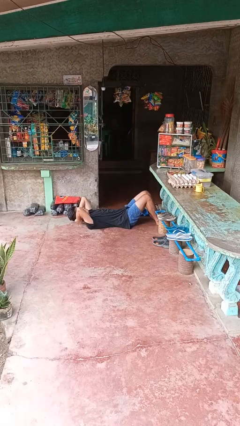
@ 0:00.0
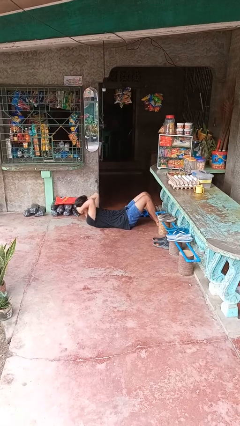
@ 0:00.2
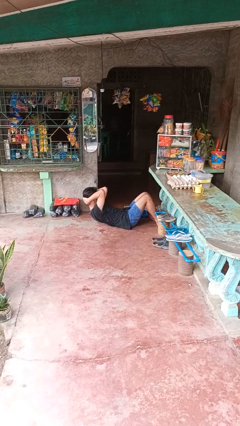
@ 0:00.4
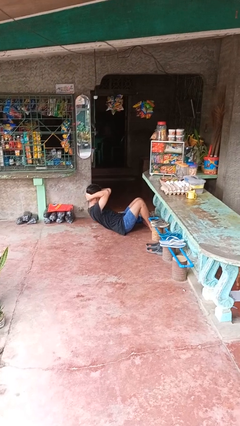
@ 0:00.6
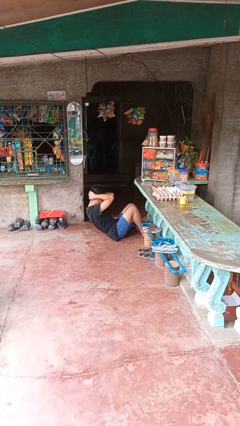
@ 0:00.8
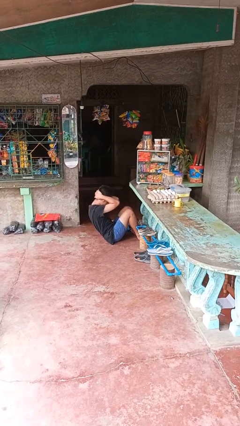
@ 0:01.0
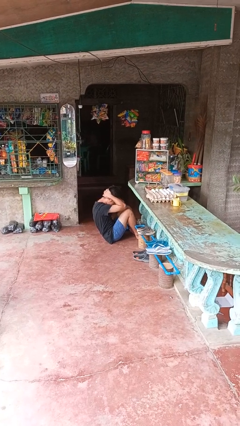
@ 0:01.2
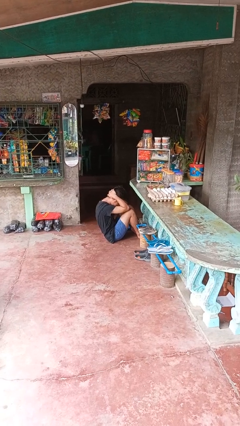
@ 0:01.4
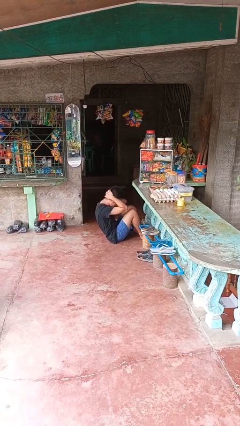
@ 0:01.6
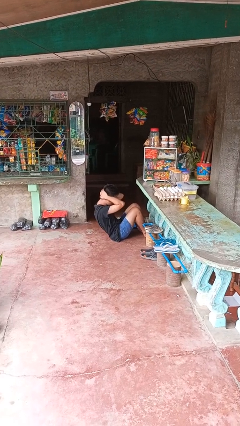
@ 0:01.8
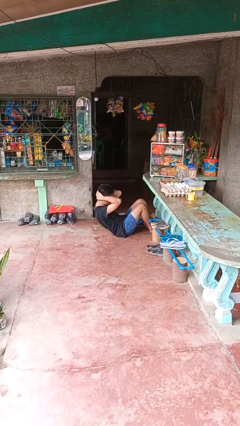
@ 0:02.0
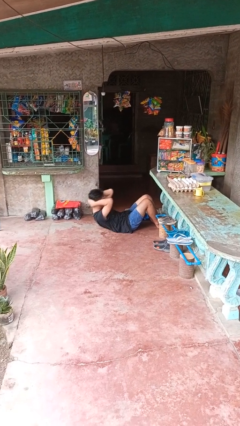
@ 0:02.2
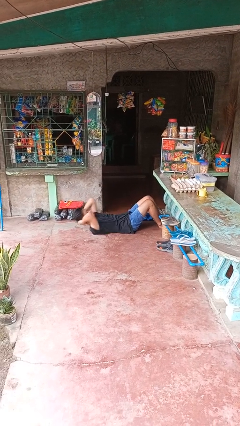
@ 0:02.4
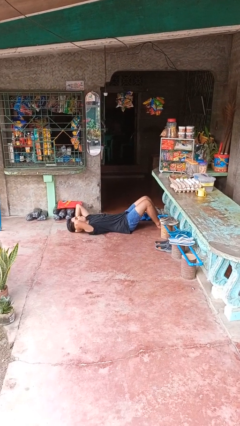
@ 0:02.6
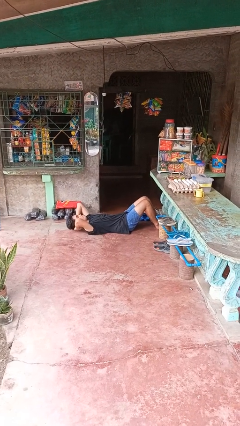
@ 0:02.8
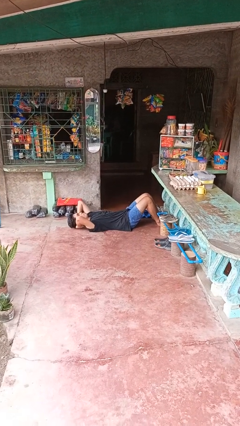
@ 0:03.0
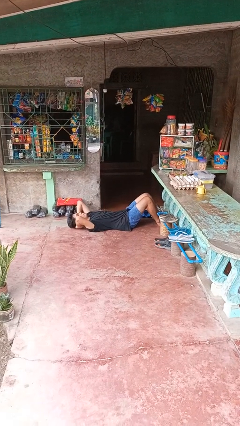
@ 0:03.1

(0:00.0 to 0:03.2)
person exercises with situp

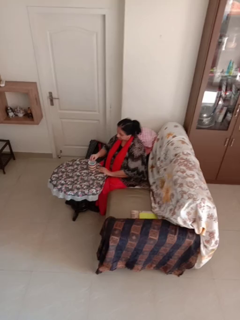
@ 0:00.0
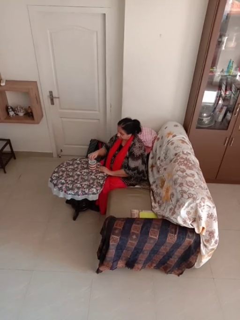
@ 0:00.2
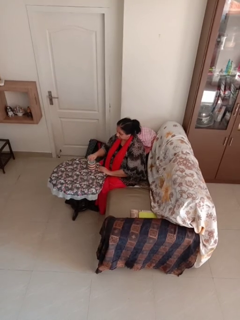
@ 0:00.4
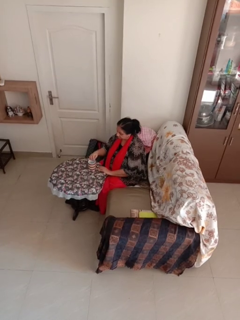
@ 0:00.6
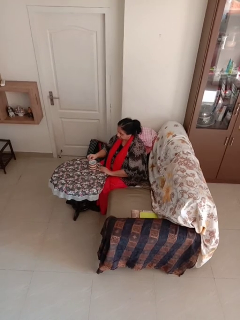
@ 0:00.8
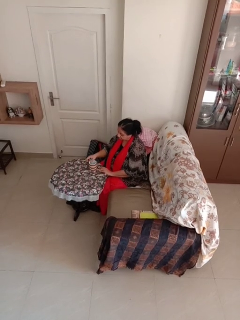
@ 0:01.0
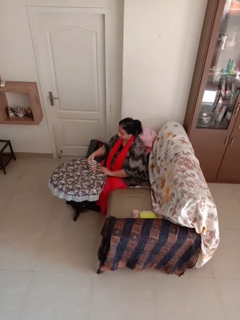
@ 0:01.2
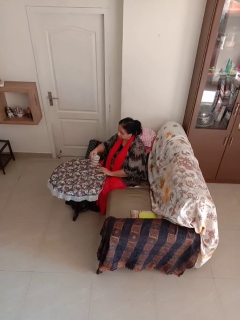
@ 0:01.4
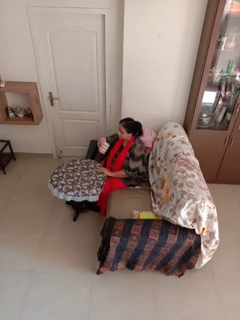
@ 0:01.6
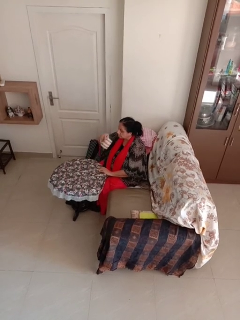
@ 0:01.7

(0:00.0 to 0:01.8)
person stirs mug

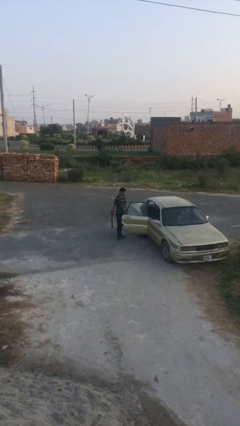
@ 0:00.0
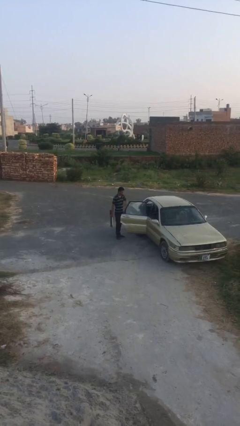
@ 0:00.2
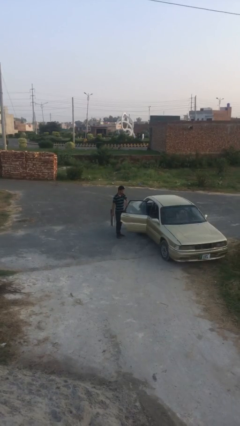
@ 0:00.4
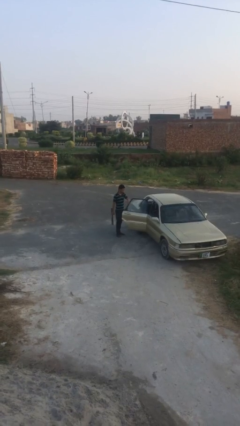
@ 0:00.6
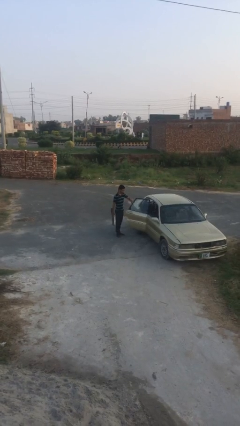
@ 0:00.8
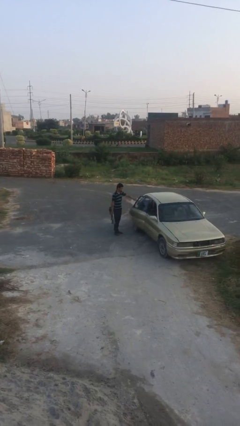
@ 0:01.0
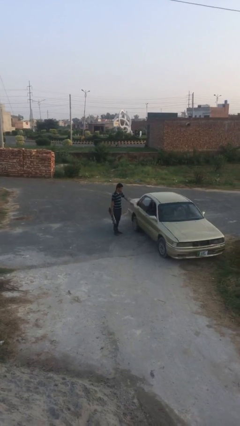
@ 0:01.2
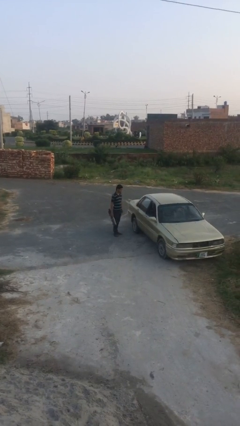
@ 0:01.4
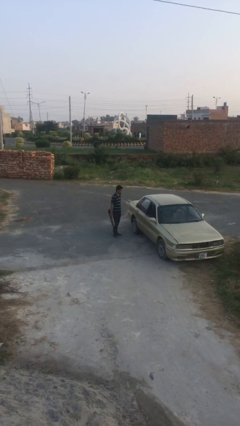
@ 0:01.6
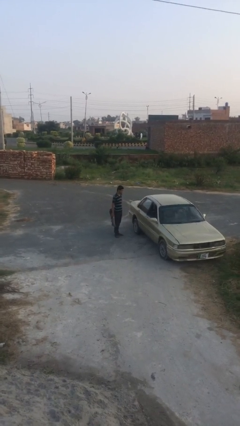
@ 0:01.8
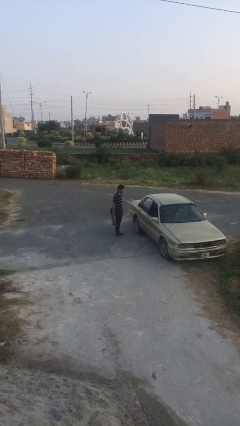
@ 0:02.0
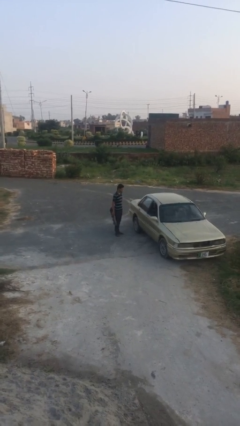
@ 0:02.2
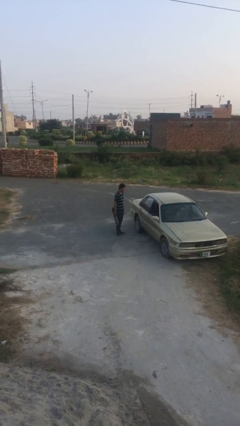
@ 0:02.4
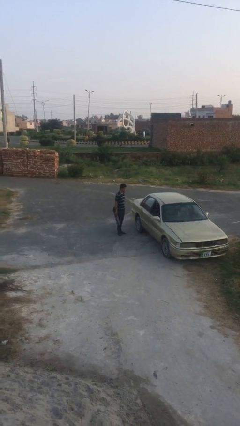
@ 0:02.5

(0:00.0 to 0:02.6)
person closes car door

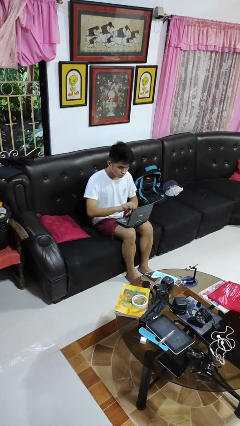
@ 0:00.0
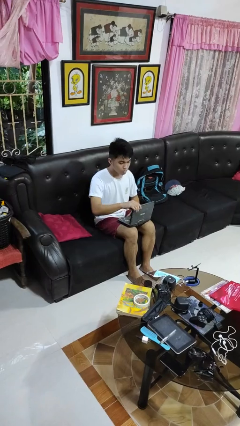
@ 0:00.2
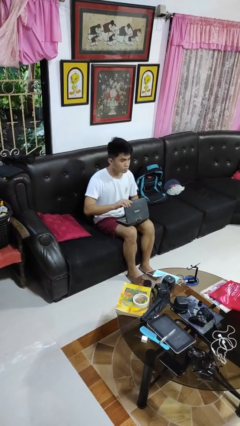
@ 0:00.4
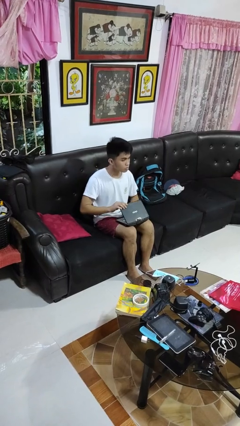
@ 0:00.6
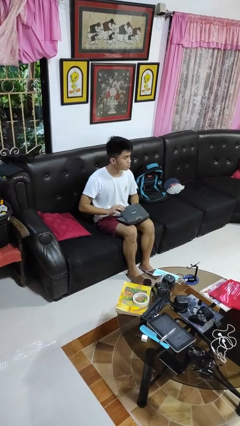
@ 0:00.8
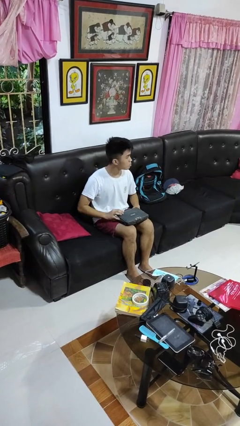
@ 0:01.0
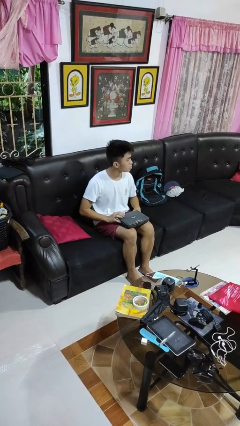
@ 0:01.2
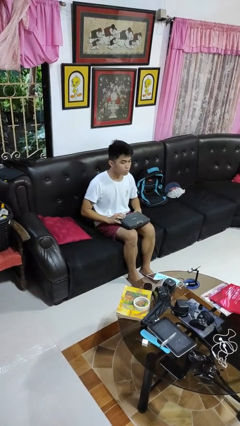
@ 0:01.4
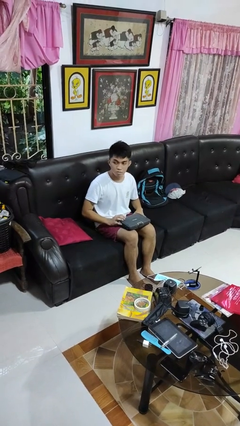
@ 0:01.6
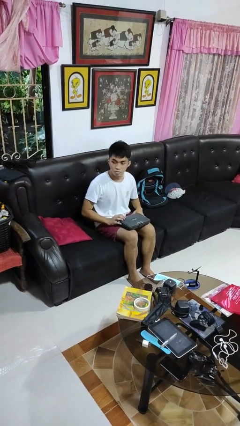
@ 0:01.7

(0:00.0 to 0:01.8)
person closes laptop

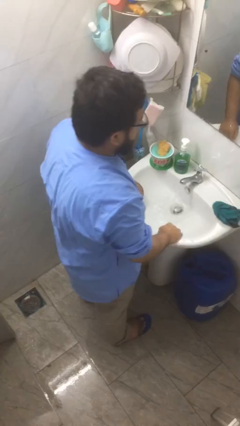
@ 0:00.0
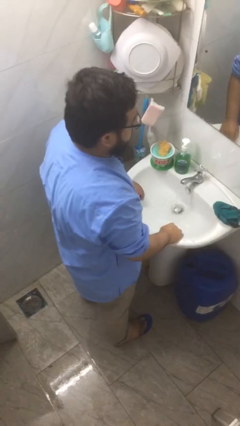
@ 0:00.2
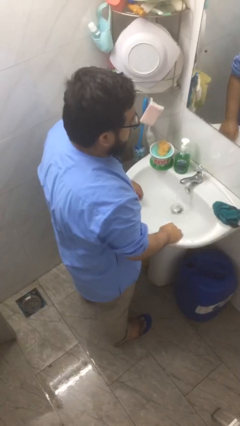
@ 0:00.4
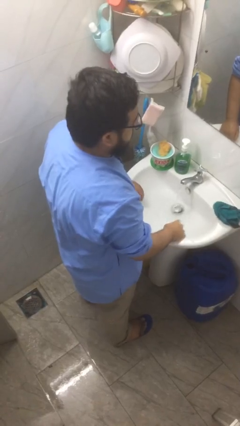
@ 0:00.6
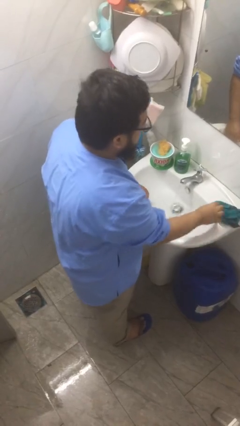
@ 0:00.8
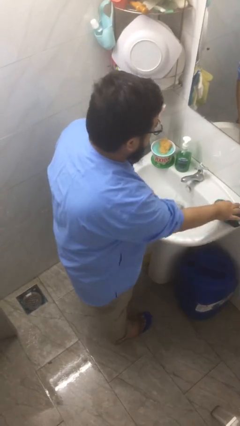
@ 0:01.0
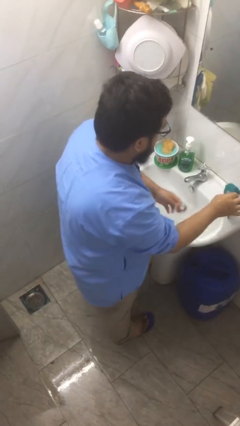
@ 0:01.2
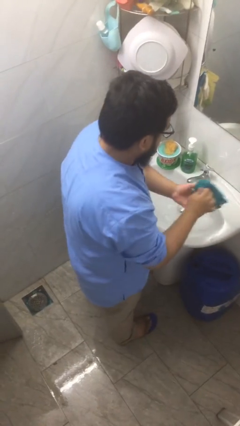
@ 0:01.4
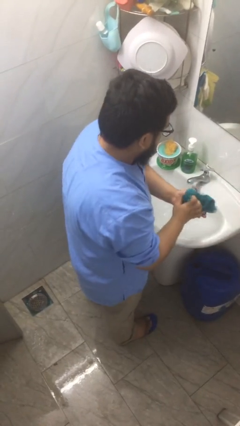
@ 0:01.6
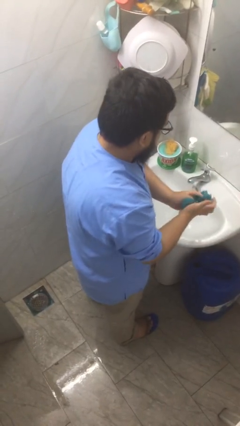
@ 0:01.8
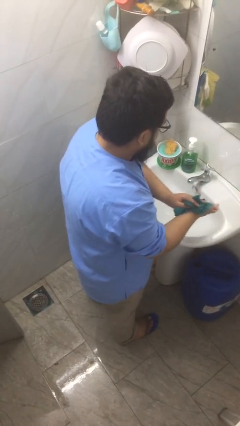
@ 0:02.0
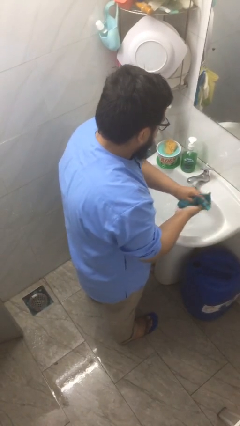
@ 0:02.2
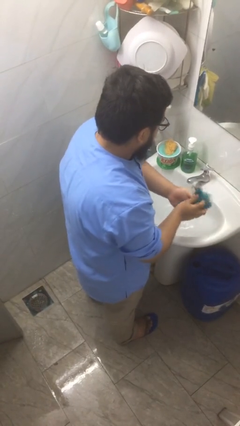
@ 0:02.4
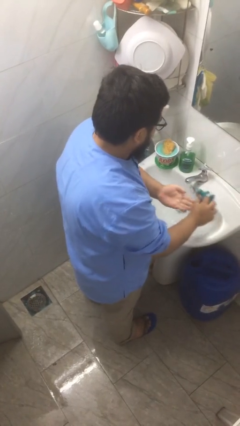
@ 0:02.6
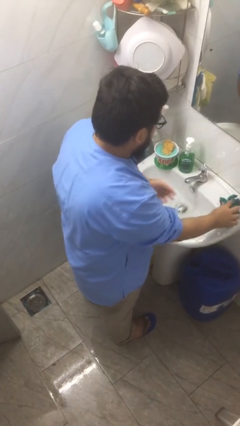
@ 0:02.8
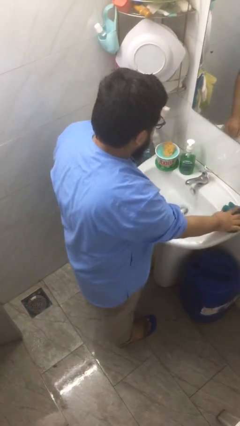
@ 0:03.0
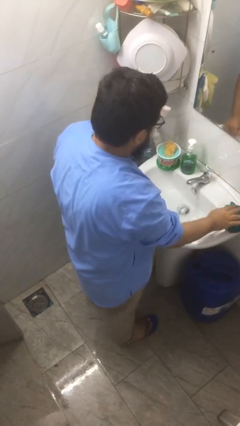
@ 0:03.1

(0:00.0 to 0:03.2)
person dries hands with towel

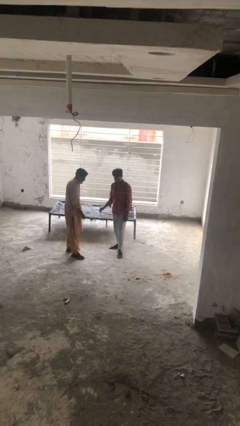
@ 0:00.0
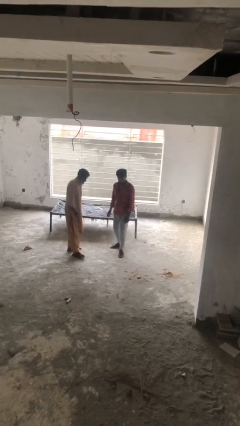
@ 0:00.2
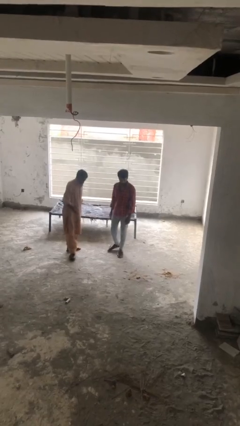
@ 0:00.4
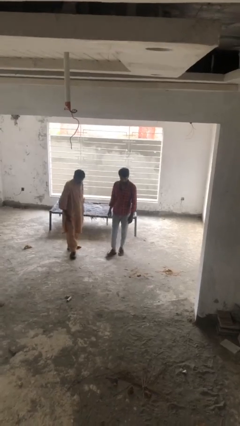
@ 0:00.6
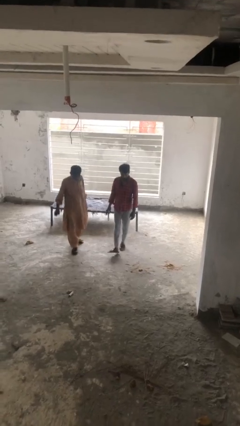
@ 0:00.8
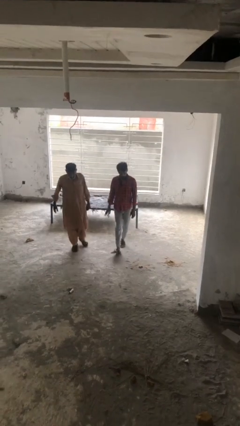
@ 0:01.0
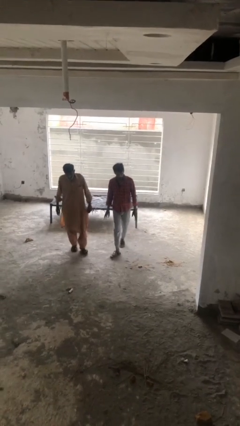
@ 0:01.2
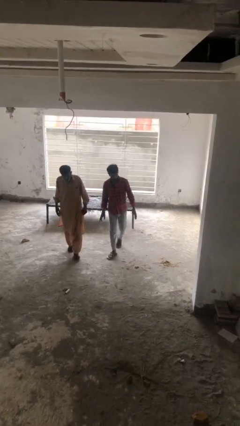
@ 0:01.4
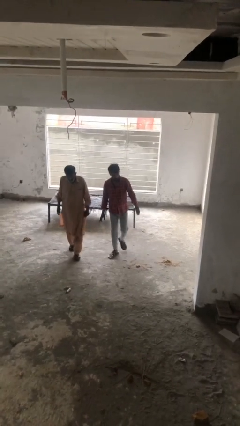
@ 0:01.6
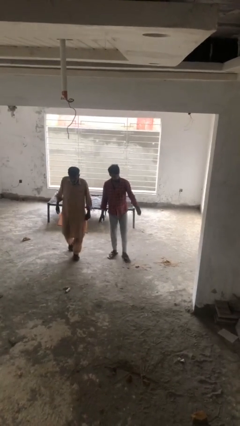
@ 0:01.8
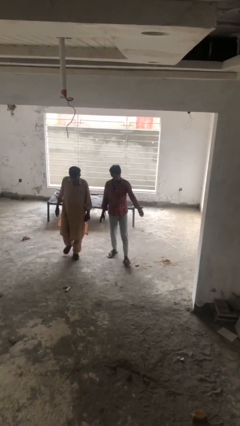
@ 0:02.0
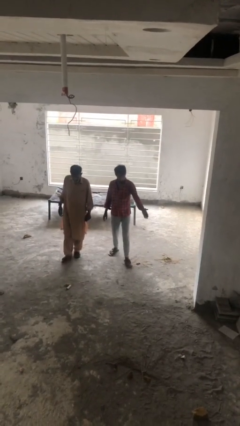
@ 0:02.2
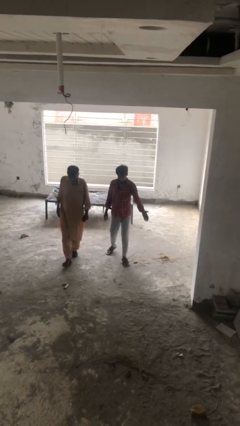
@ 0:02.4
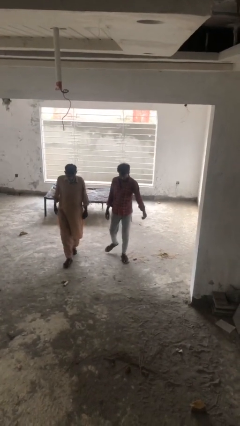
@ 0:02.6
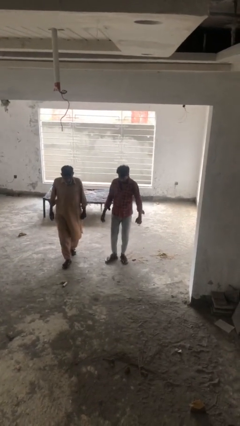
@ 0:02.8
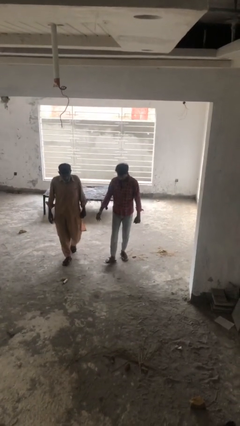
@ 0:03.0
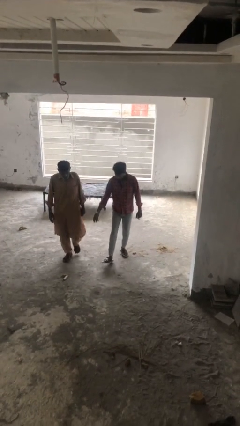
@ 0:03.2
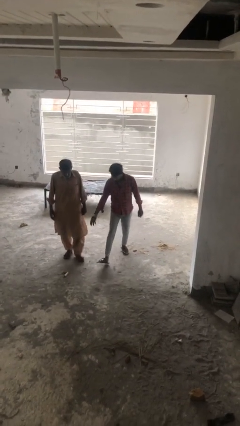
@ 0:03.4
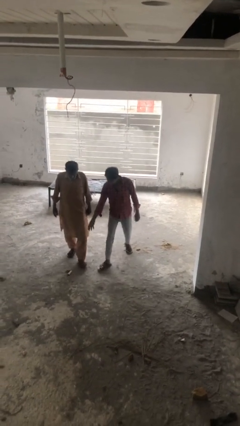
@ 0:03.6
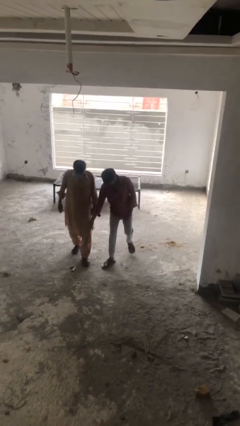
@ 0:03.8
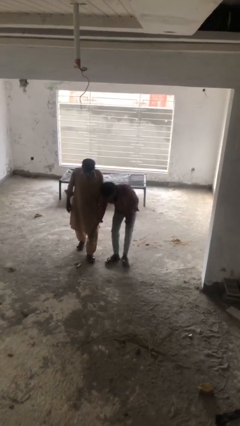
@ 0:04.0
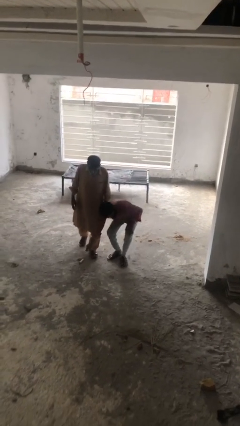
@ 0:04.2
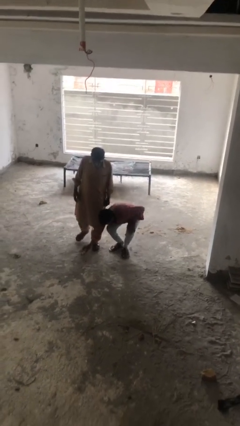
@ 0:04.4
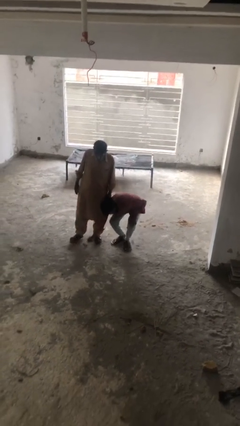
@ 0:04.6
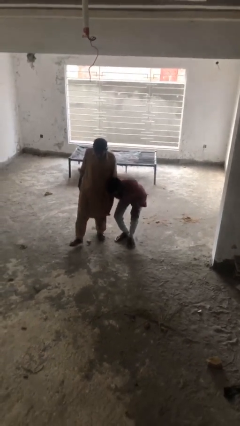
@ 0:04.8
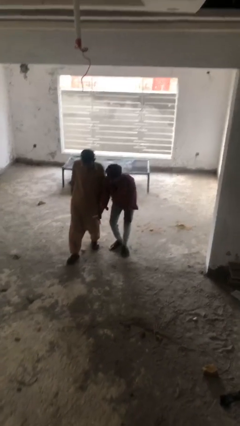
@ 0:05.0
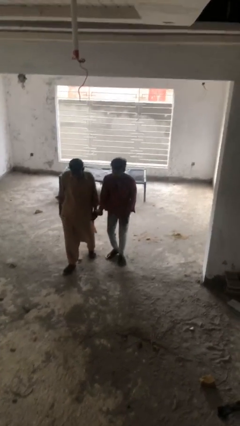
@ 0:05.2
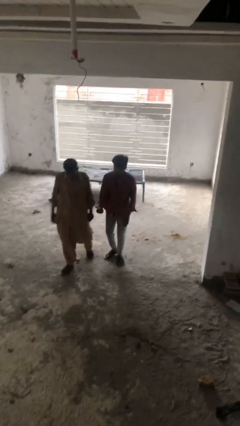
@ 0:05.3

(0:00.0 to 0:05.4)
person talks to person
